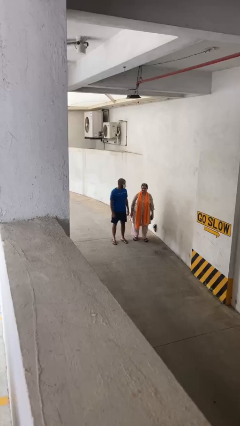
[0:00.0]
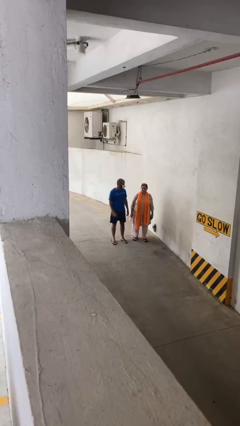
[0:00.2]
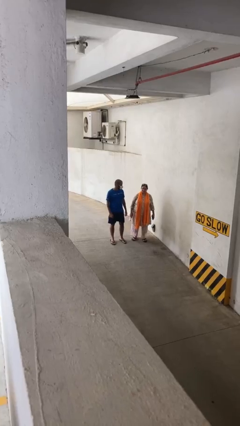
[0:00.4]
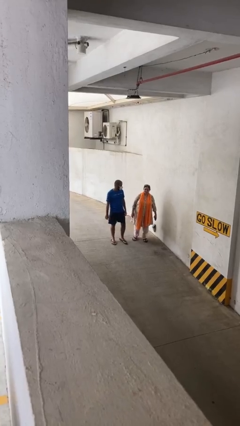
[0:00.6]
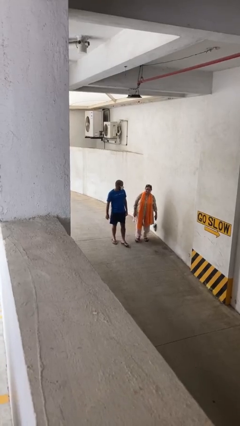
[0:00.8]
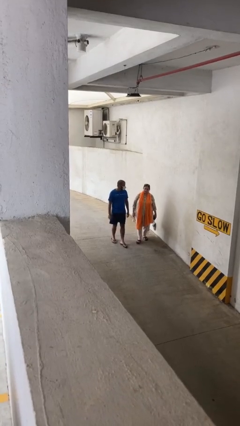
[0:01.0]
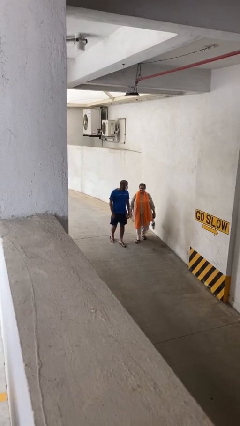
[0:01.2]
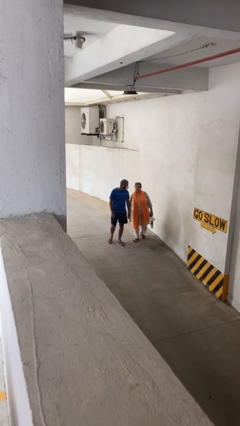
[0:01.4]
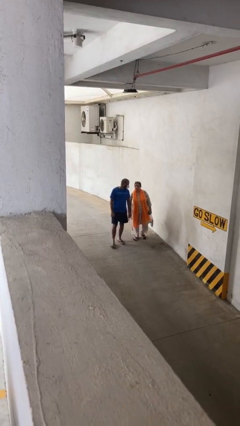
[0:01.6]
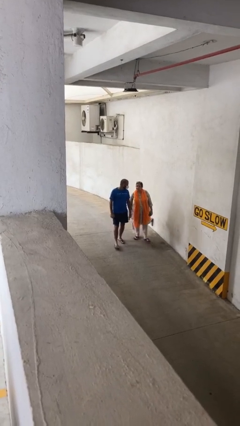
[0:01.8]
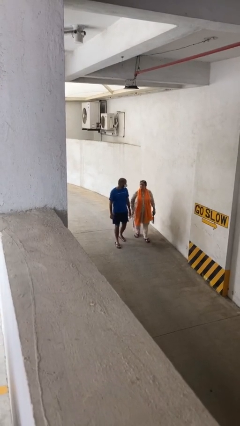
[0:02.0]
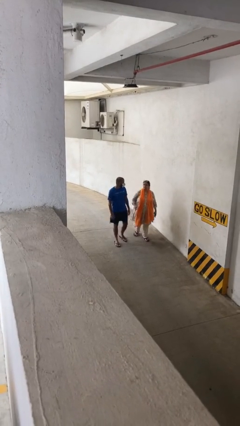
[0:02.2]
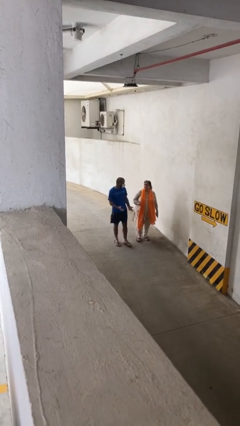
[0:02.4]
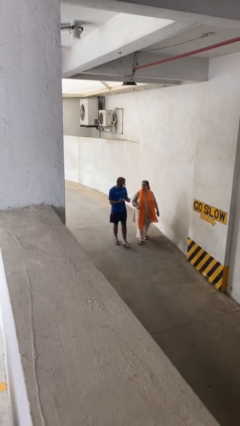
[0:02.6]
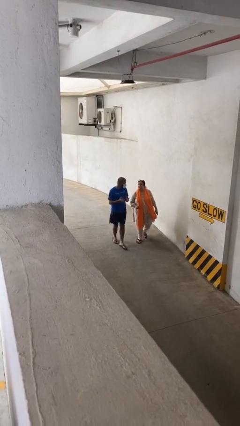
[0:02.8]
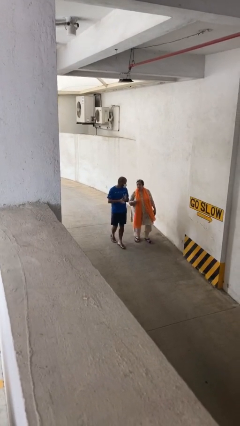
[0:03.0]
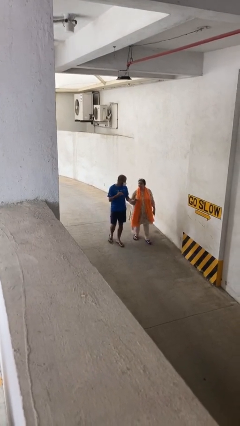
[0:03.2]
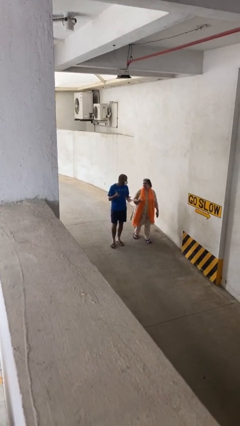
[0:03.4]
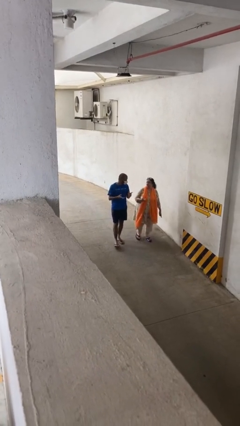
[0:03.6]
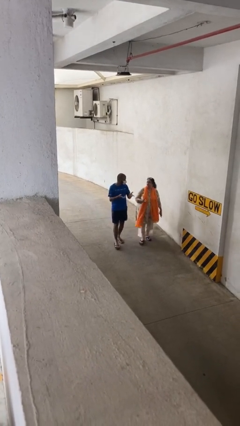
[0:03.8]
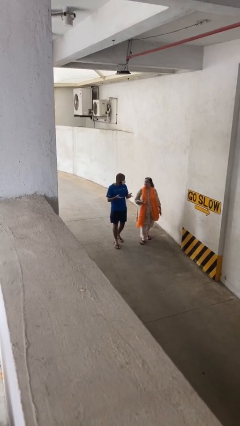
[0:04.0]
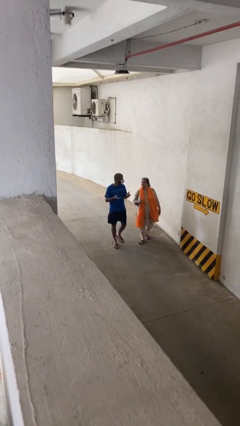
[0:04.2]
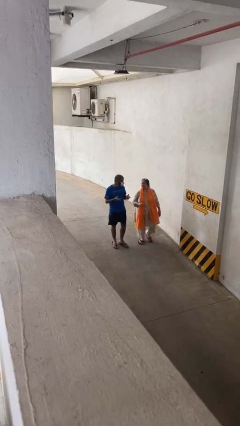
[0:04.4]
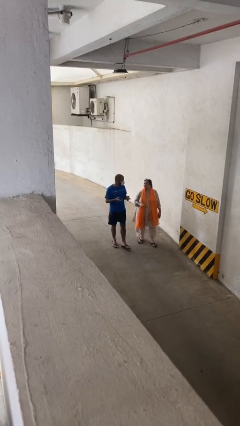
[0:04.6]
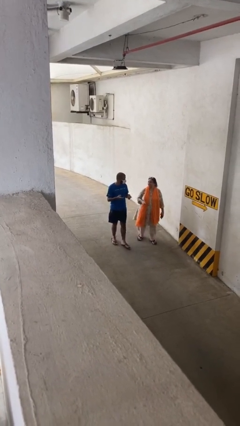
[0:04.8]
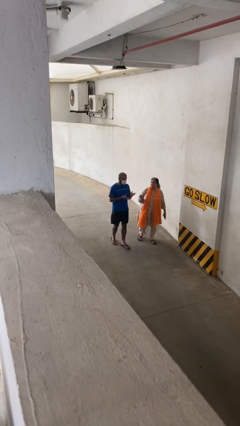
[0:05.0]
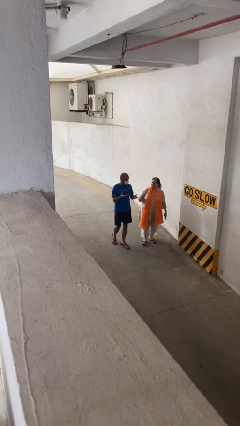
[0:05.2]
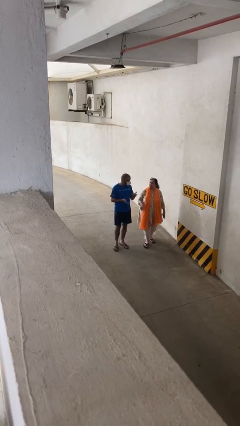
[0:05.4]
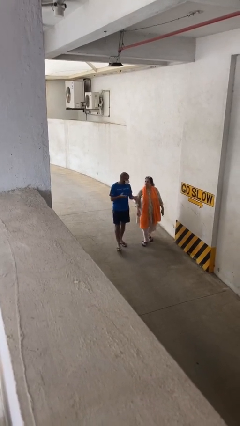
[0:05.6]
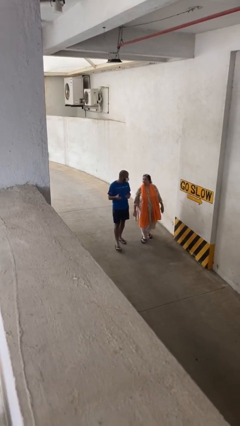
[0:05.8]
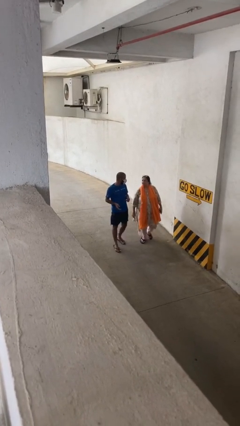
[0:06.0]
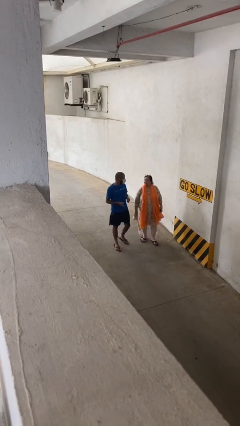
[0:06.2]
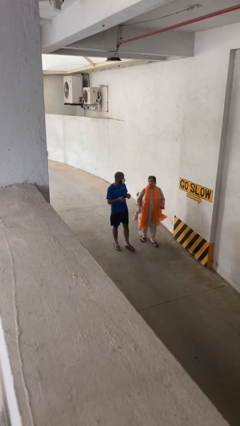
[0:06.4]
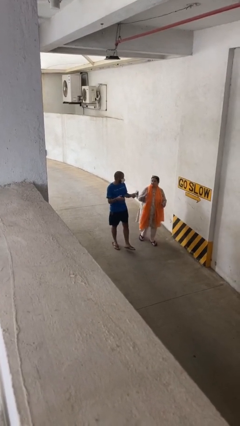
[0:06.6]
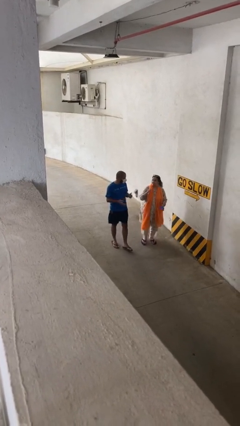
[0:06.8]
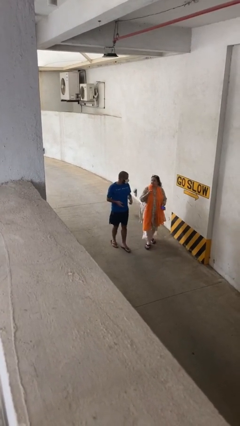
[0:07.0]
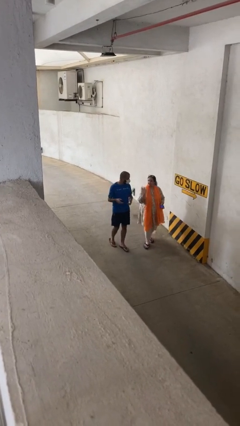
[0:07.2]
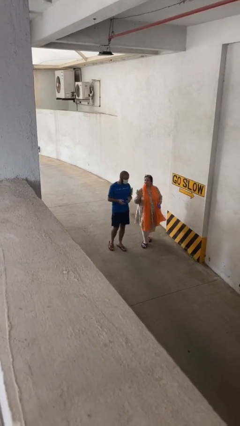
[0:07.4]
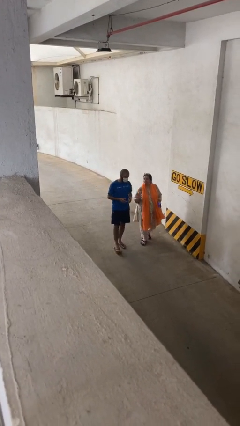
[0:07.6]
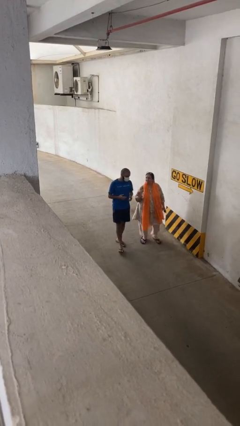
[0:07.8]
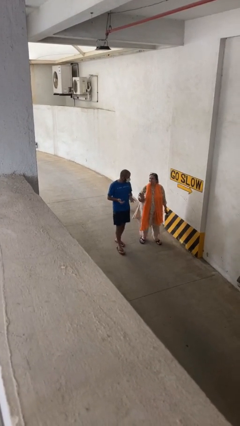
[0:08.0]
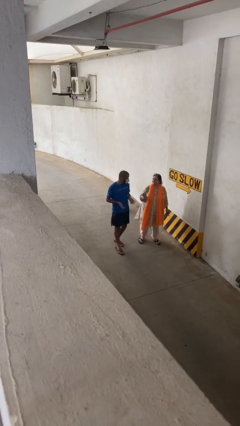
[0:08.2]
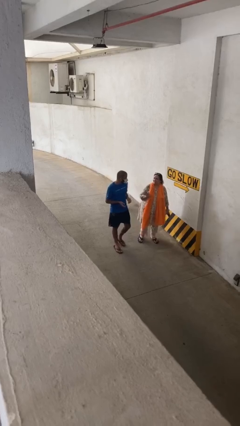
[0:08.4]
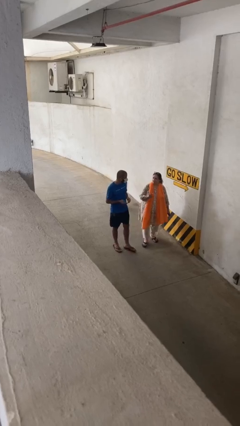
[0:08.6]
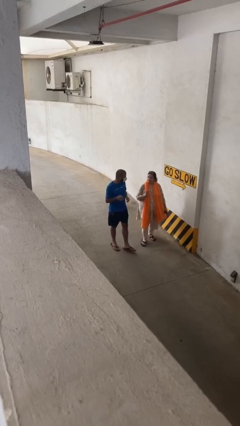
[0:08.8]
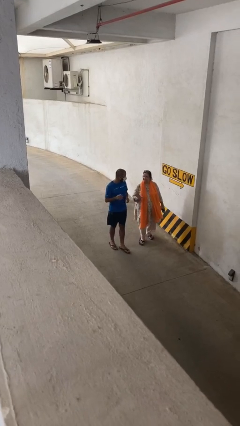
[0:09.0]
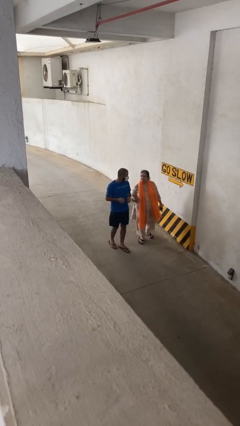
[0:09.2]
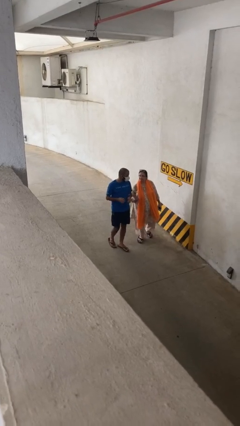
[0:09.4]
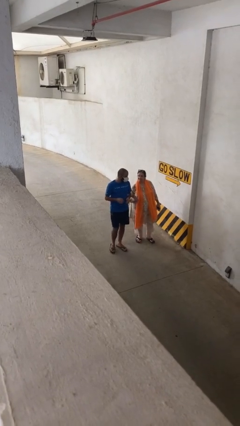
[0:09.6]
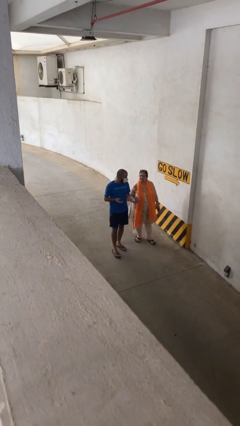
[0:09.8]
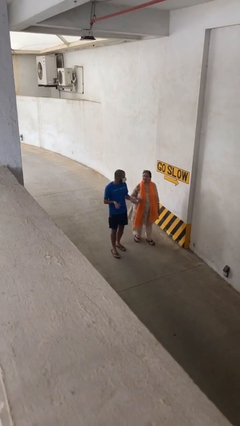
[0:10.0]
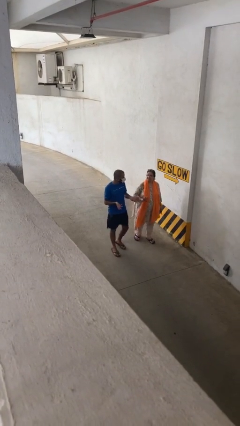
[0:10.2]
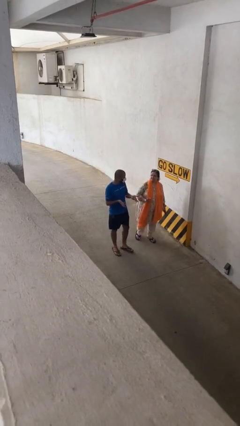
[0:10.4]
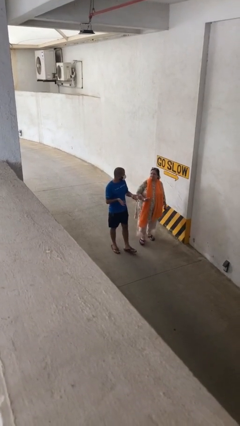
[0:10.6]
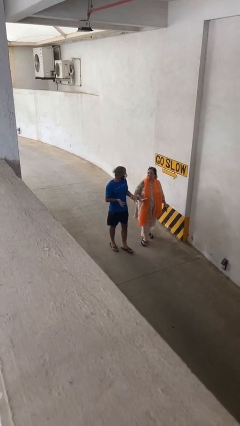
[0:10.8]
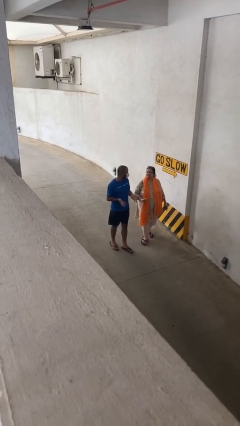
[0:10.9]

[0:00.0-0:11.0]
person talks to person

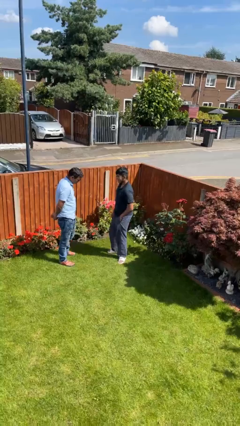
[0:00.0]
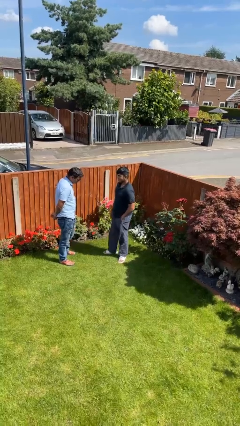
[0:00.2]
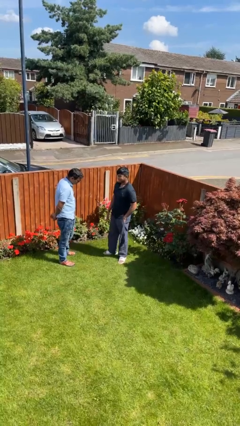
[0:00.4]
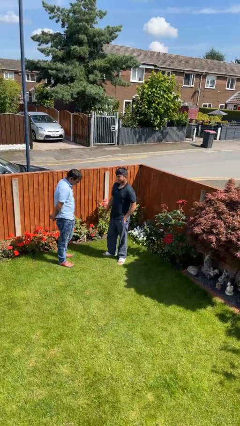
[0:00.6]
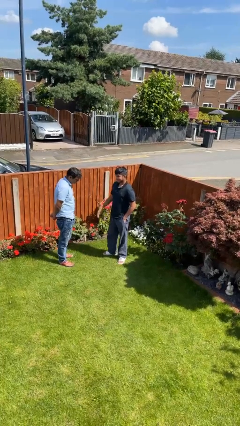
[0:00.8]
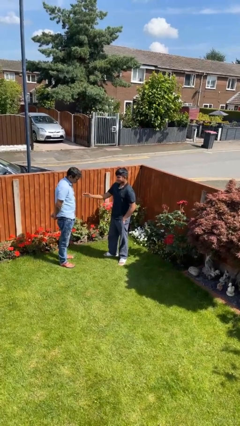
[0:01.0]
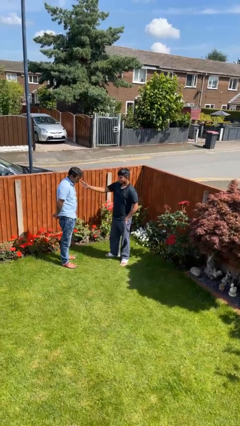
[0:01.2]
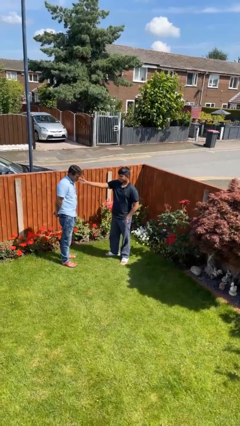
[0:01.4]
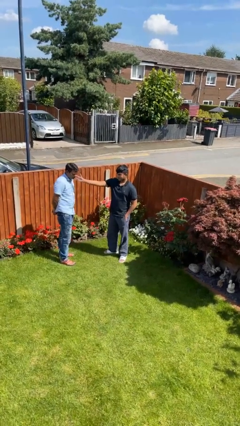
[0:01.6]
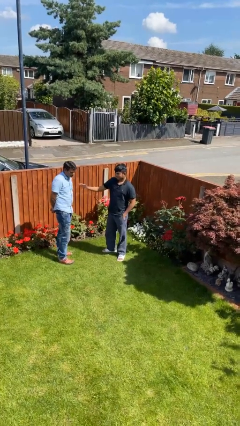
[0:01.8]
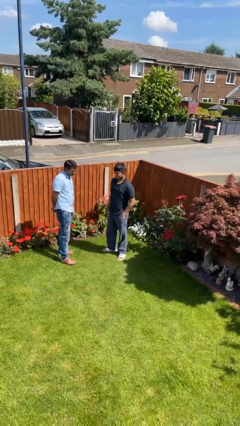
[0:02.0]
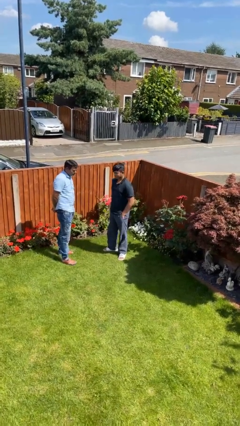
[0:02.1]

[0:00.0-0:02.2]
person touches face of person

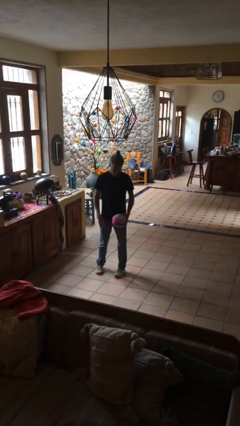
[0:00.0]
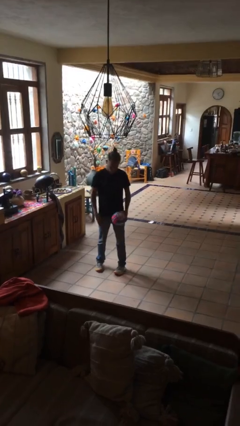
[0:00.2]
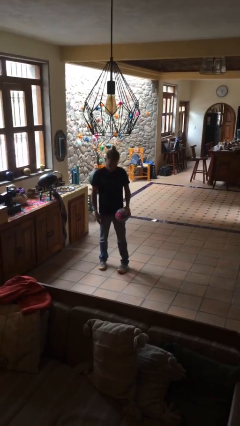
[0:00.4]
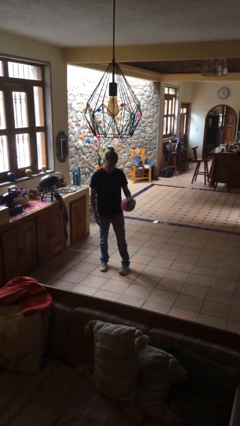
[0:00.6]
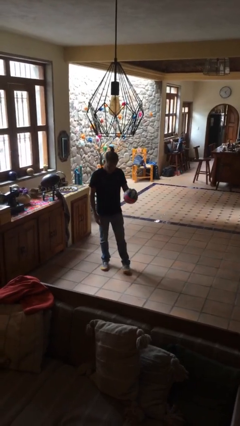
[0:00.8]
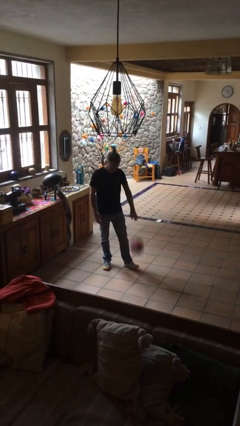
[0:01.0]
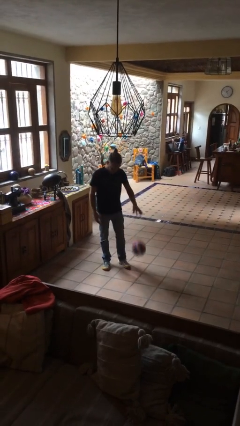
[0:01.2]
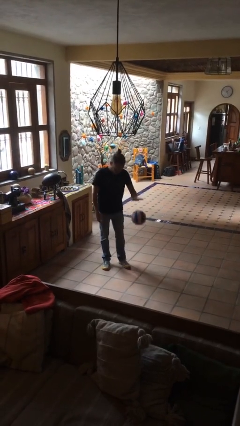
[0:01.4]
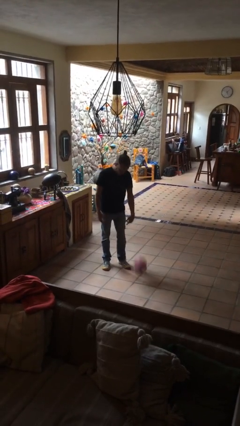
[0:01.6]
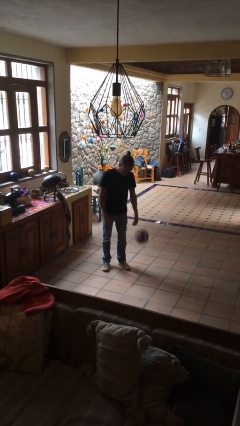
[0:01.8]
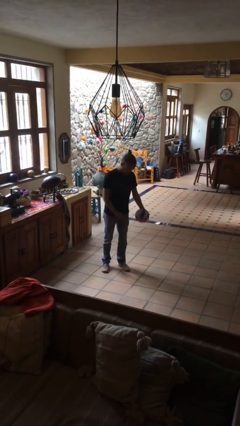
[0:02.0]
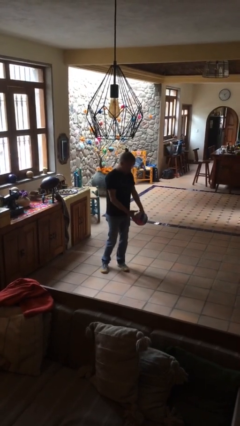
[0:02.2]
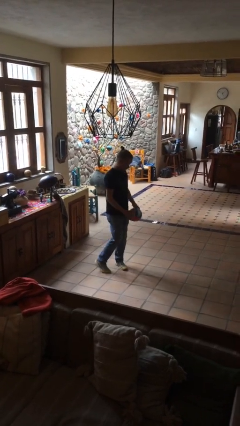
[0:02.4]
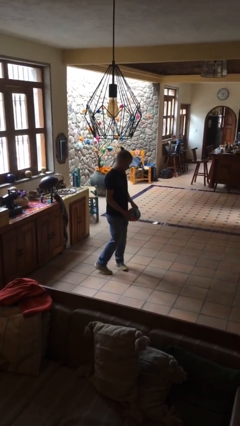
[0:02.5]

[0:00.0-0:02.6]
person bounces ball on floor

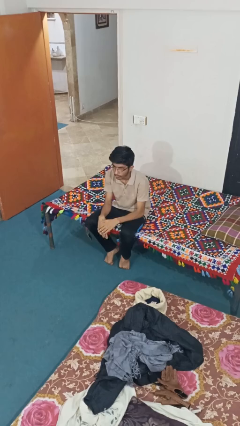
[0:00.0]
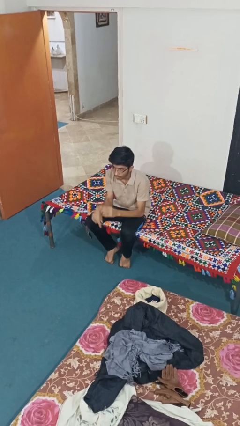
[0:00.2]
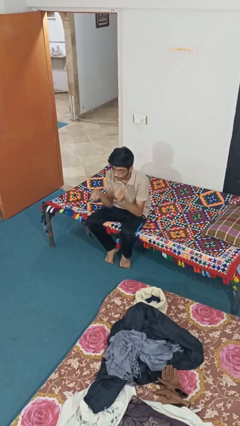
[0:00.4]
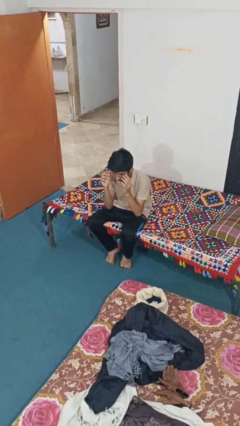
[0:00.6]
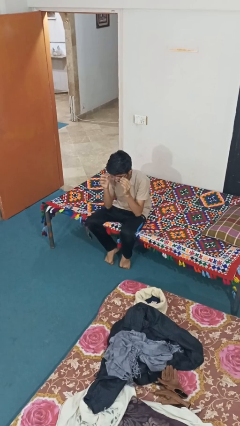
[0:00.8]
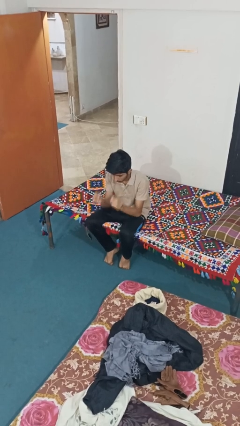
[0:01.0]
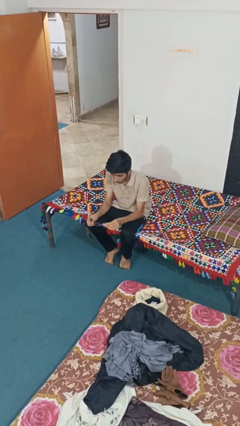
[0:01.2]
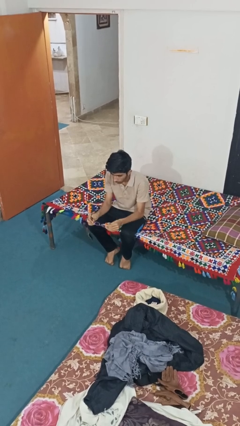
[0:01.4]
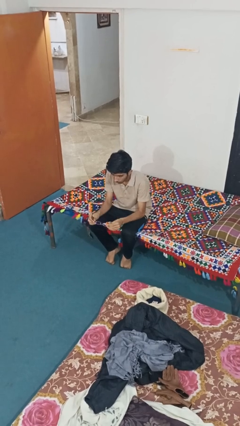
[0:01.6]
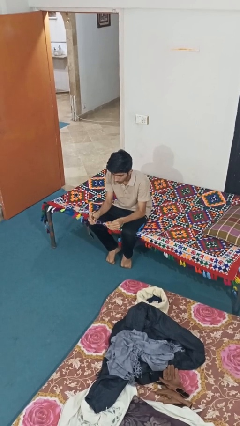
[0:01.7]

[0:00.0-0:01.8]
person takes off glasses

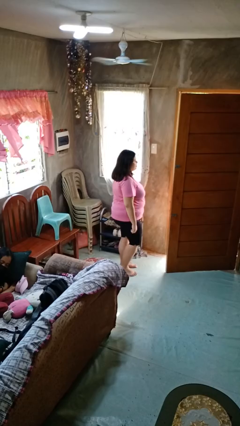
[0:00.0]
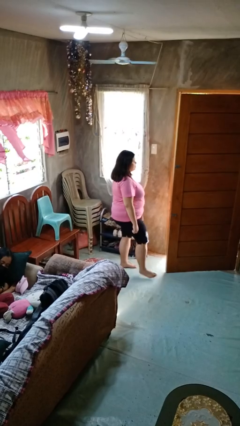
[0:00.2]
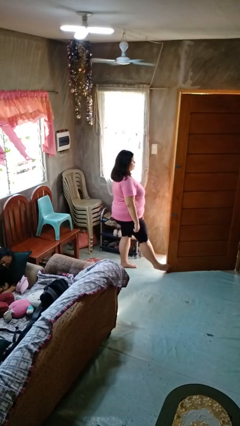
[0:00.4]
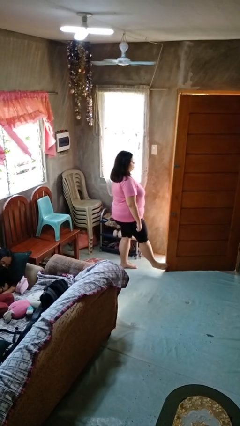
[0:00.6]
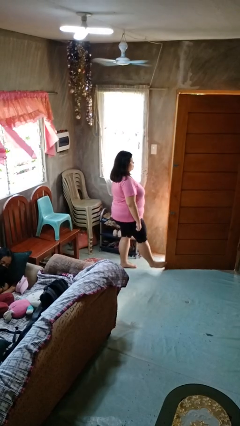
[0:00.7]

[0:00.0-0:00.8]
person closes door with foot
